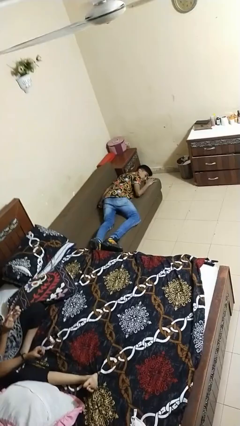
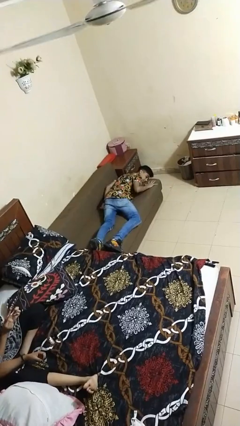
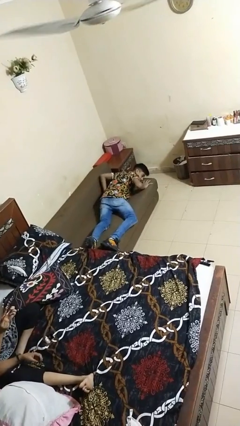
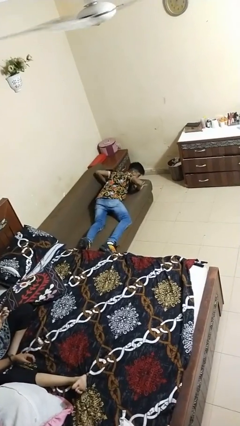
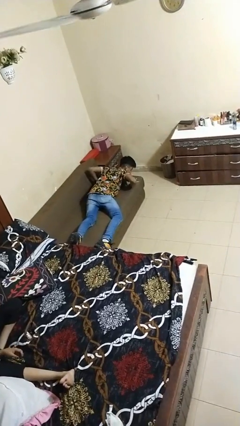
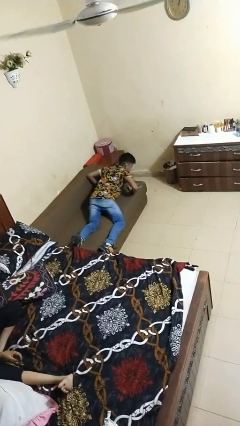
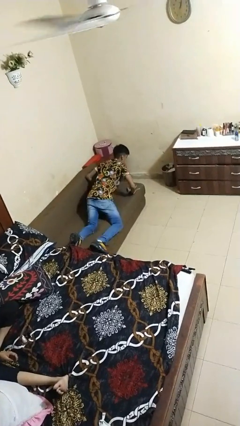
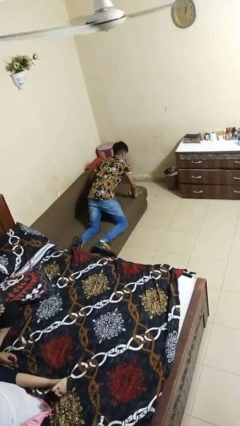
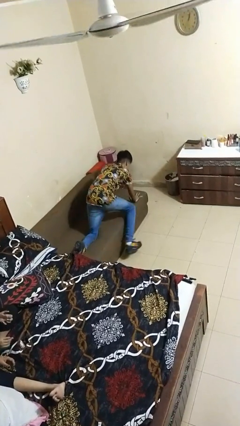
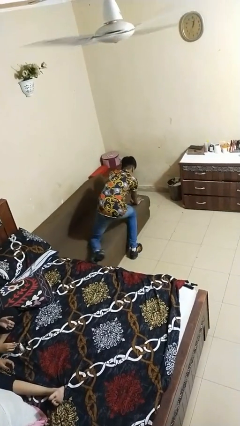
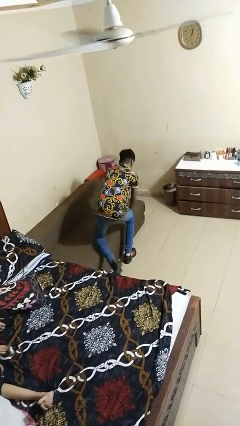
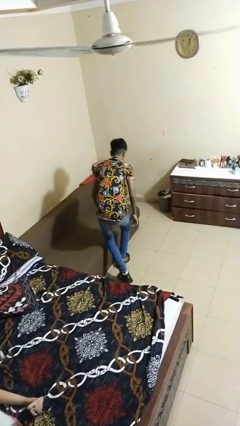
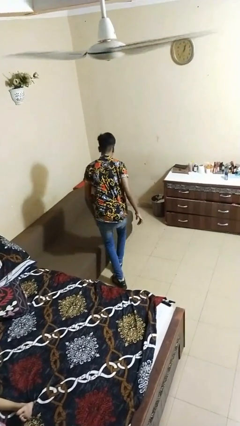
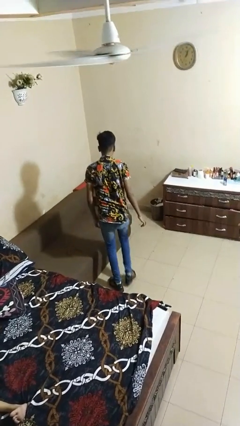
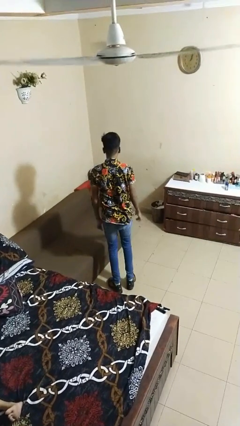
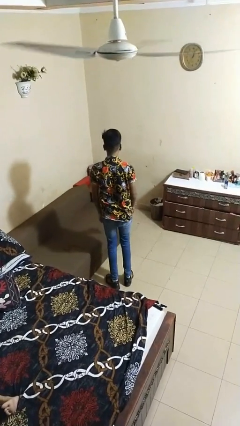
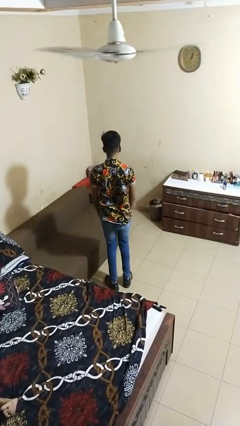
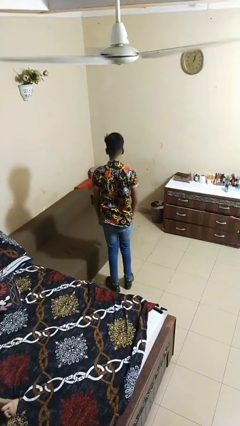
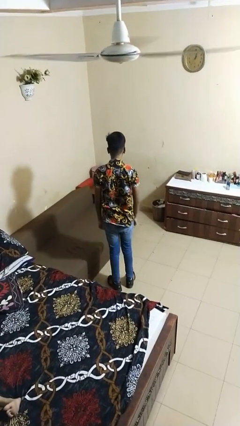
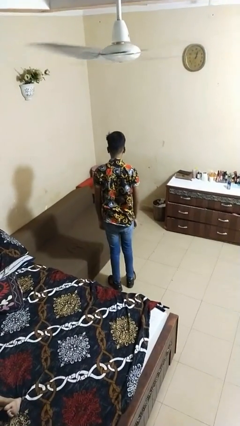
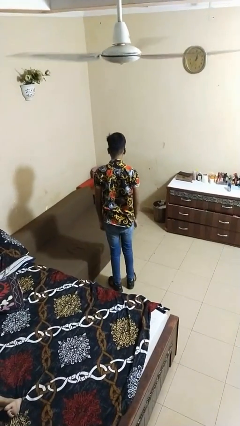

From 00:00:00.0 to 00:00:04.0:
person stands up

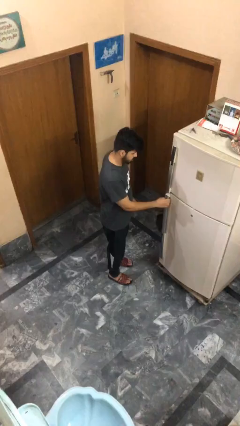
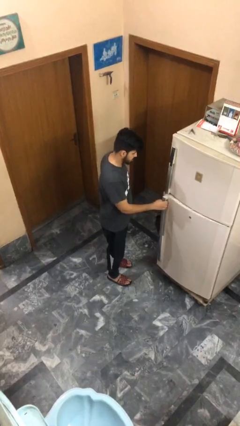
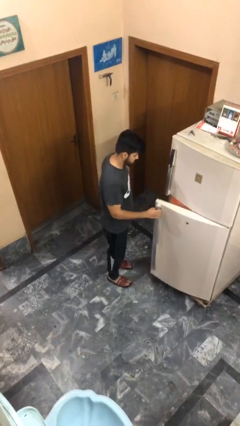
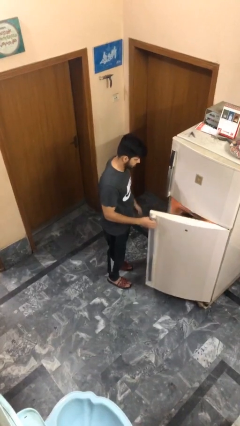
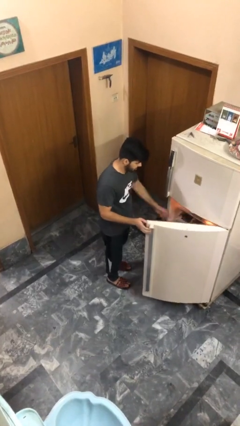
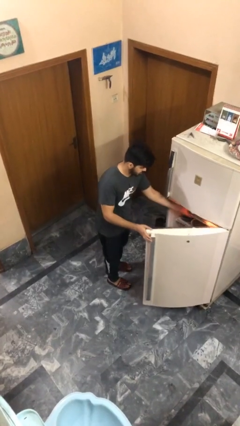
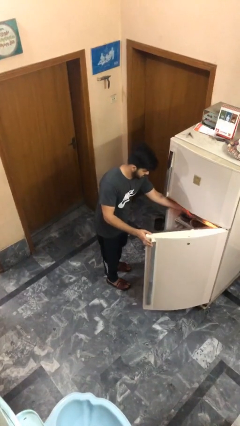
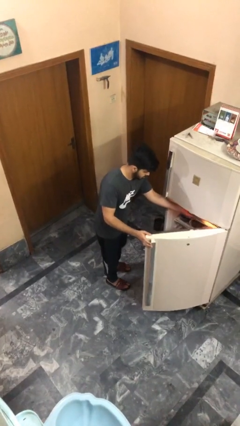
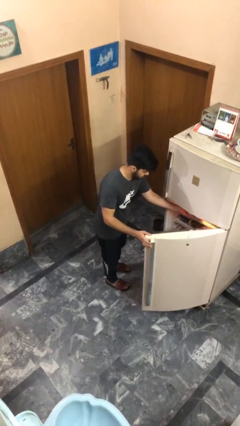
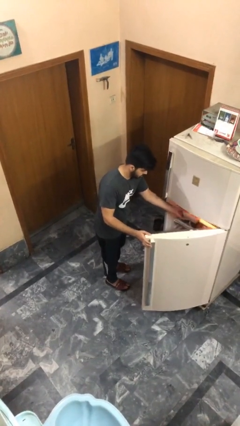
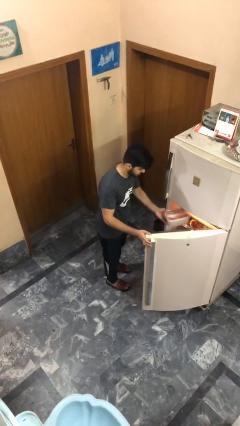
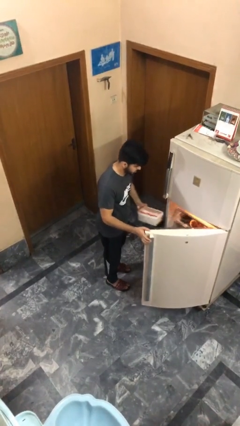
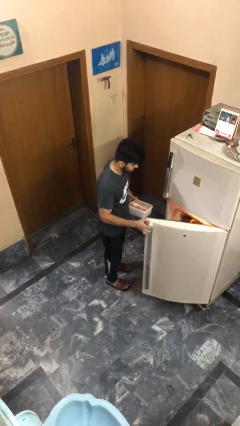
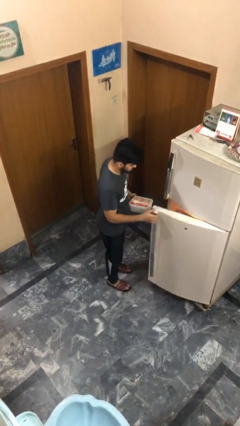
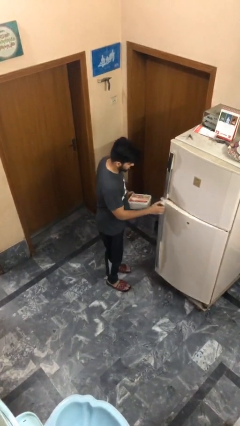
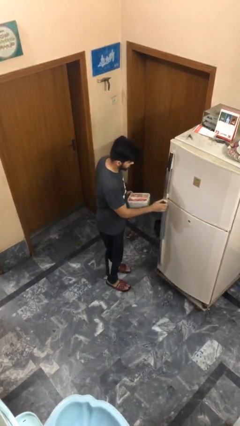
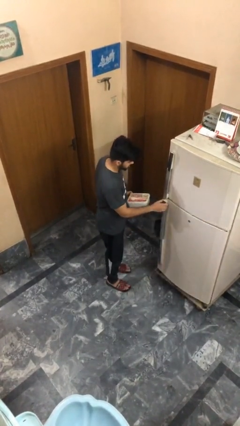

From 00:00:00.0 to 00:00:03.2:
person takes object from refrigerator

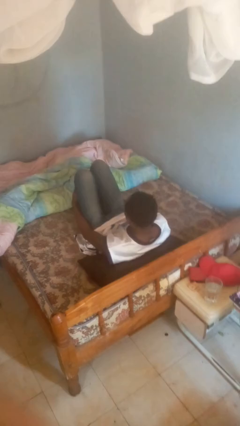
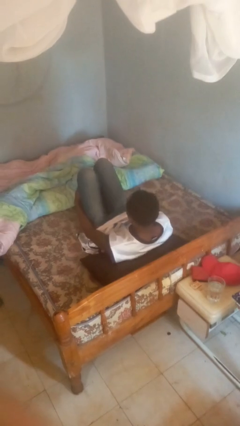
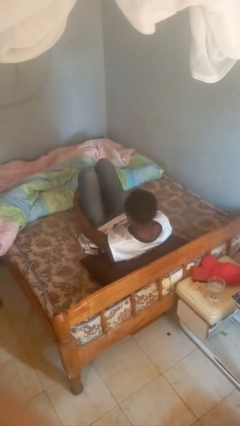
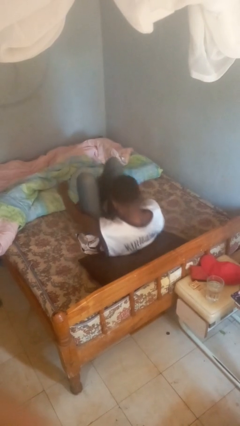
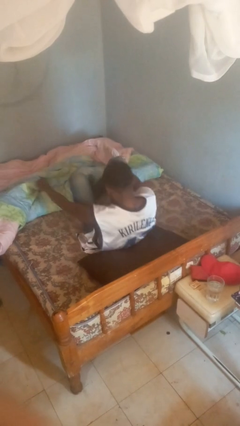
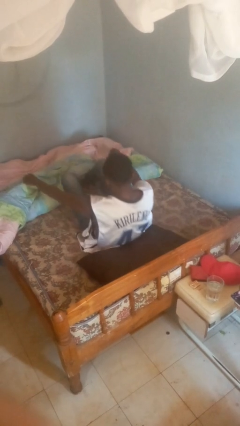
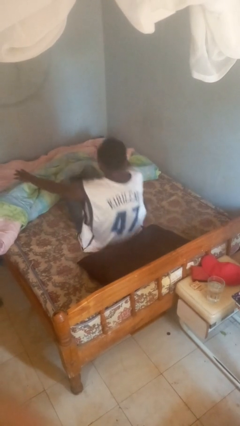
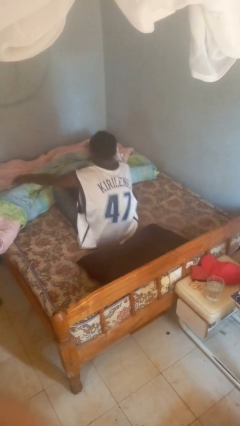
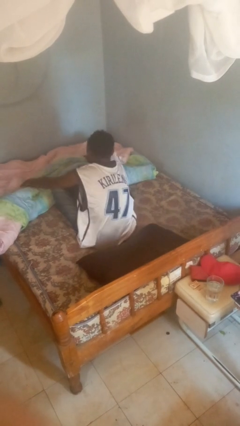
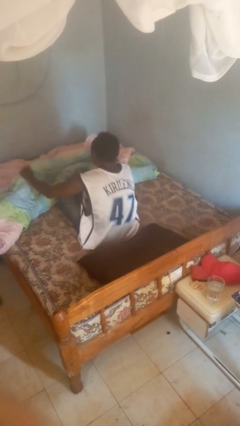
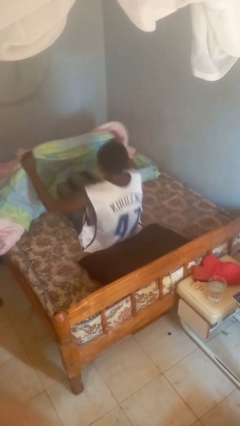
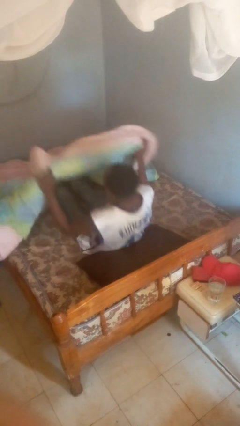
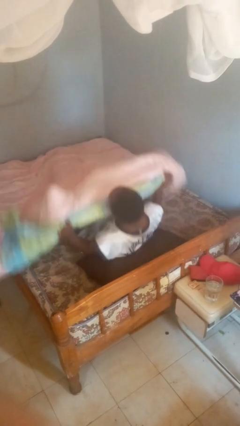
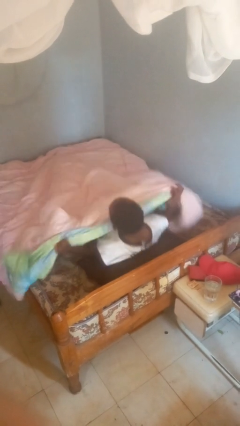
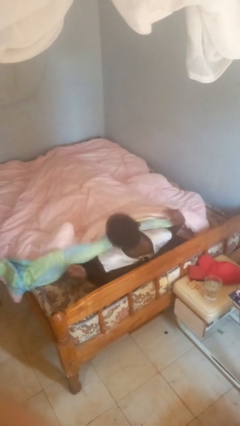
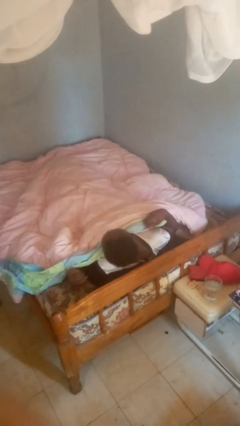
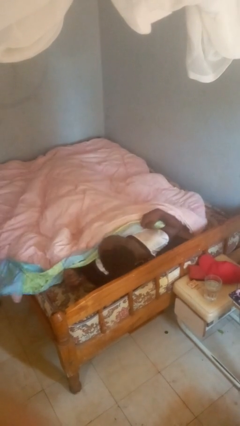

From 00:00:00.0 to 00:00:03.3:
person covers with bedsheets

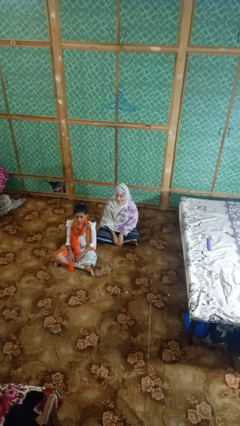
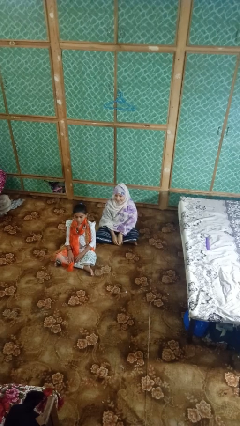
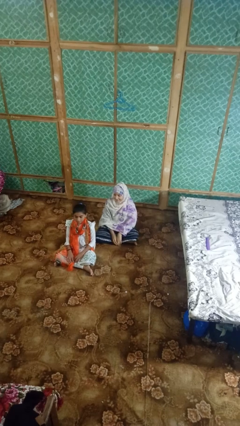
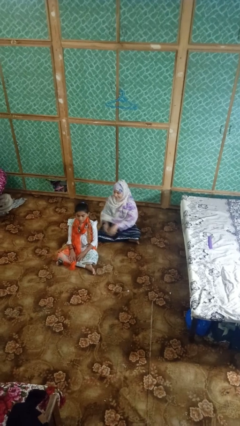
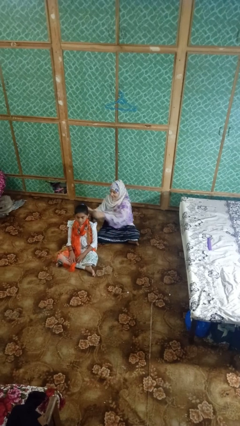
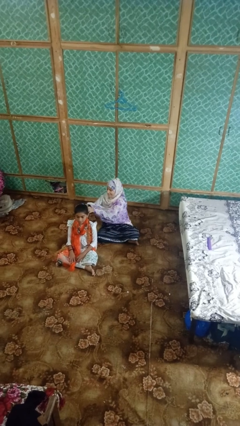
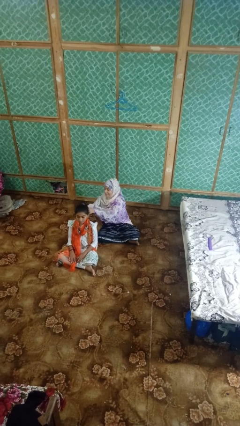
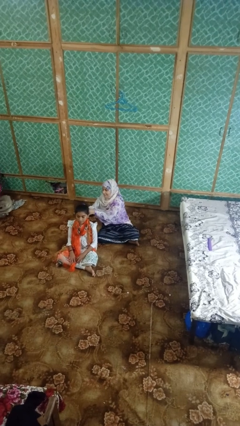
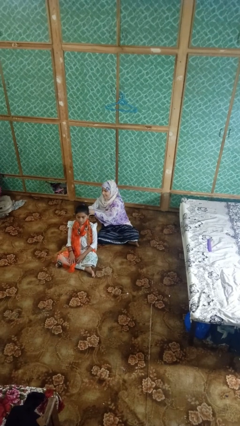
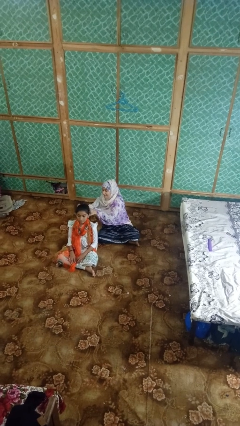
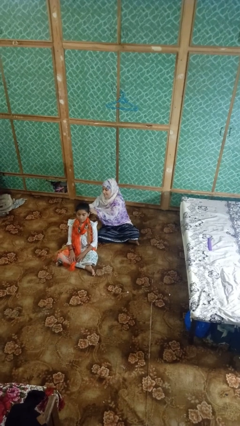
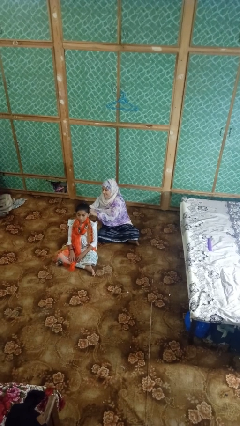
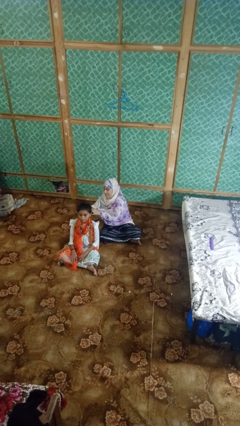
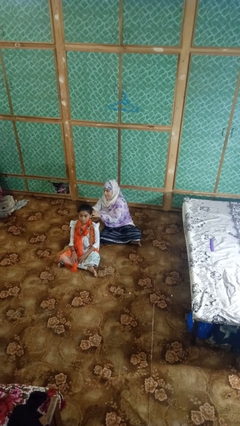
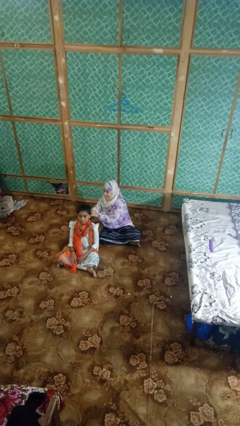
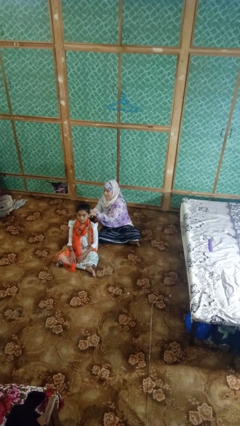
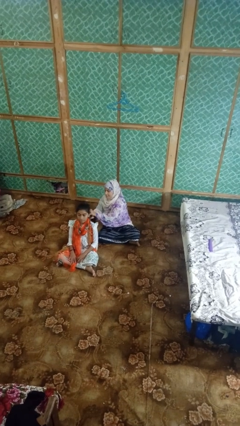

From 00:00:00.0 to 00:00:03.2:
person braids hair of person

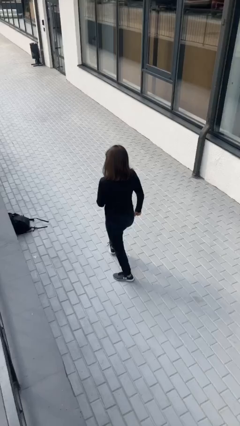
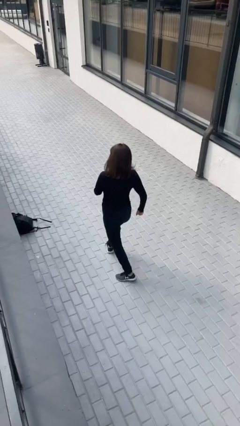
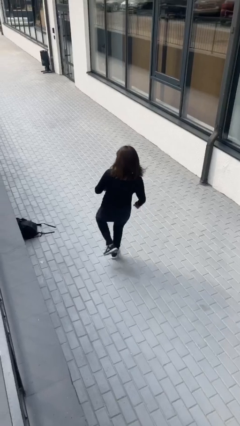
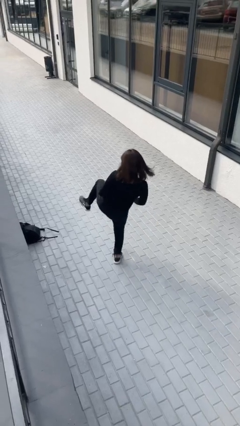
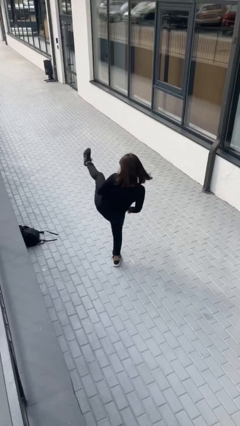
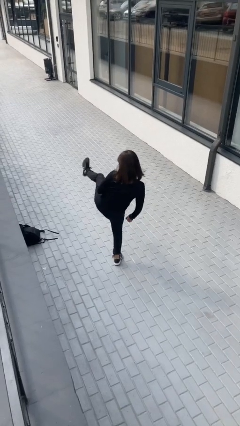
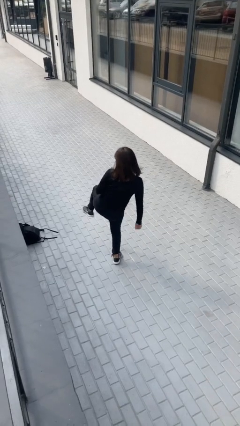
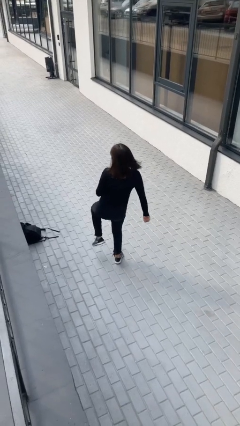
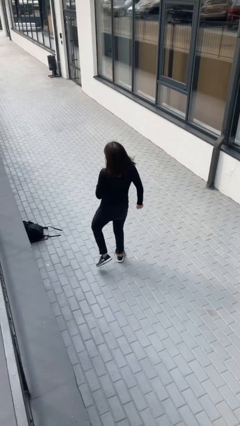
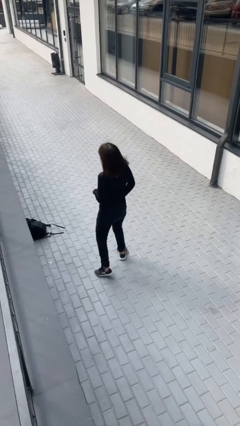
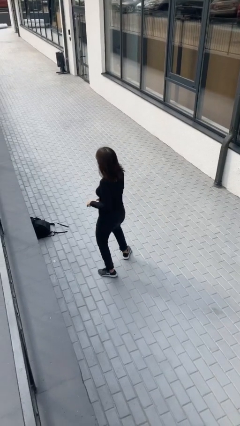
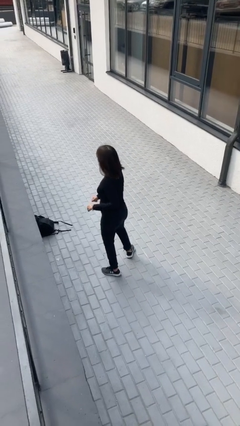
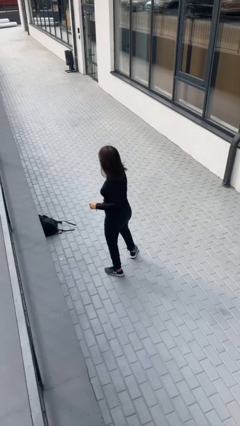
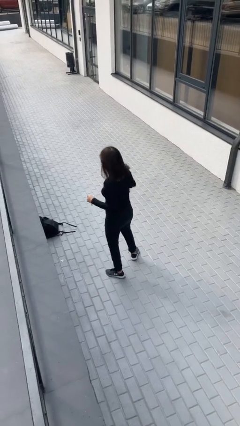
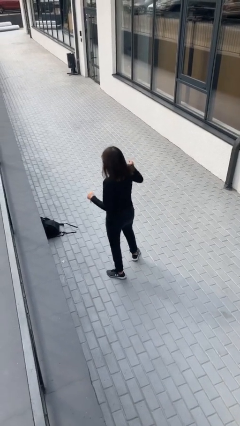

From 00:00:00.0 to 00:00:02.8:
person karate kicks

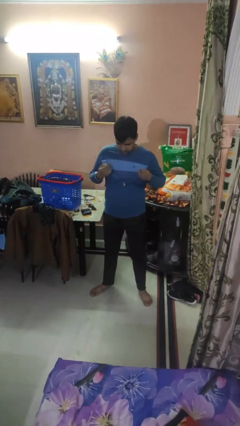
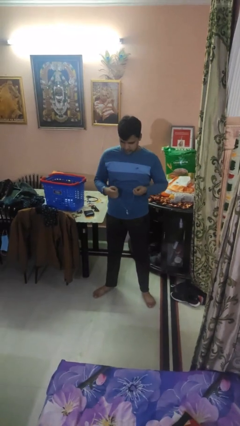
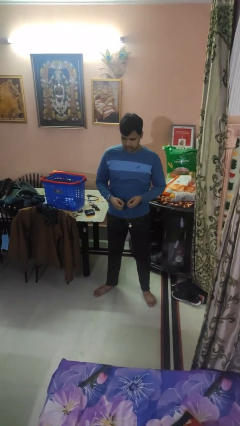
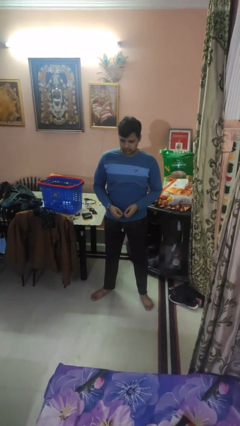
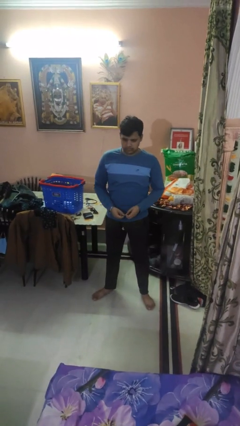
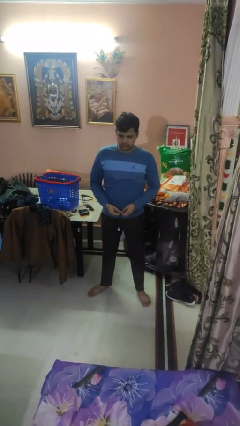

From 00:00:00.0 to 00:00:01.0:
person takes off necklace
